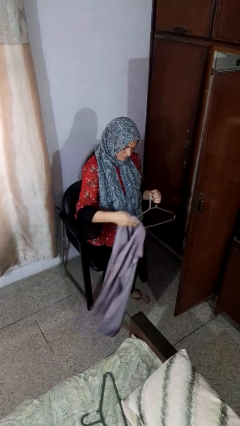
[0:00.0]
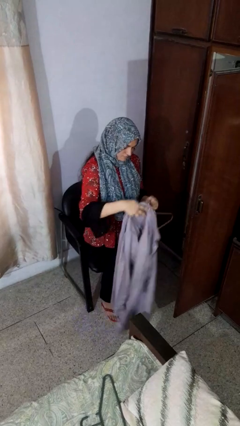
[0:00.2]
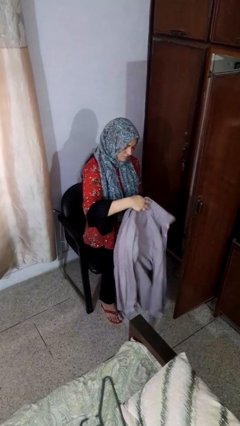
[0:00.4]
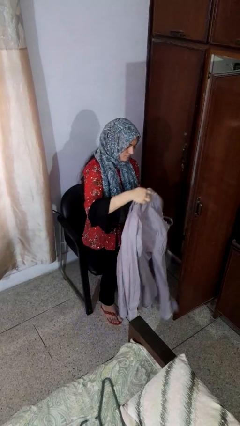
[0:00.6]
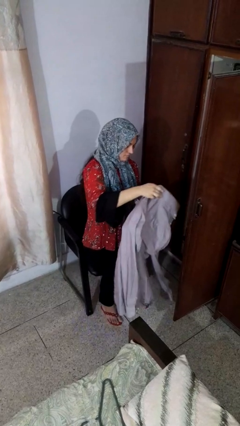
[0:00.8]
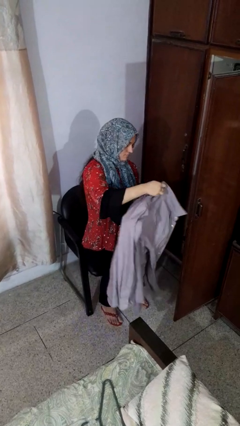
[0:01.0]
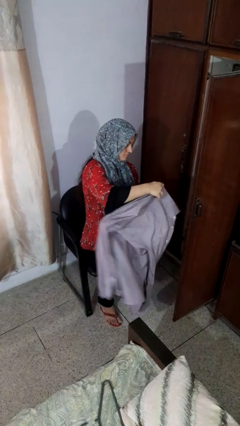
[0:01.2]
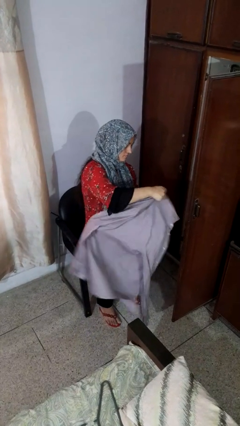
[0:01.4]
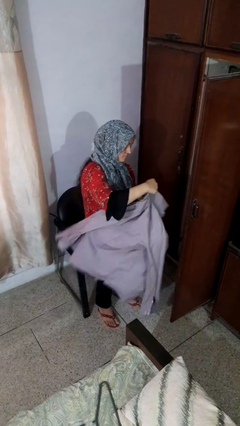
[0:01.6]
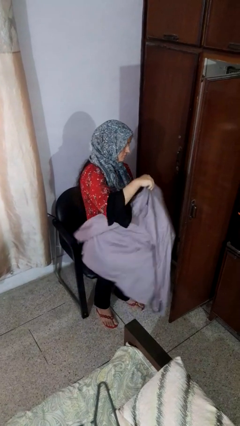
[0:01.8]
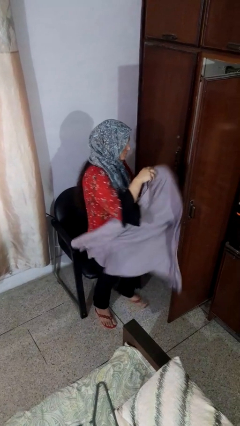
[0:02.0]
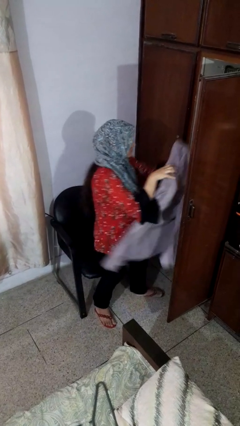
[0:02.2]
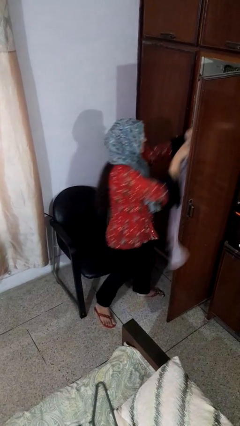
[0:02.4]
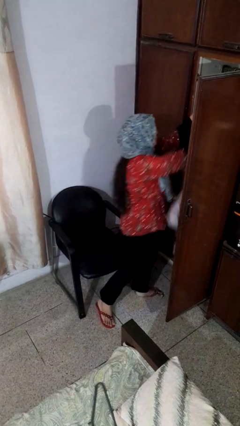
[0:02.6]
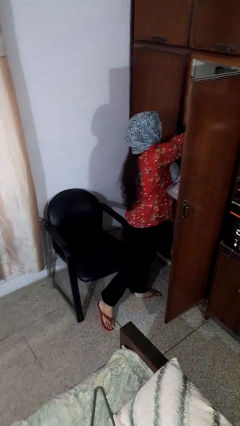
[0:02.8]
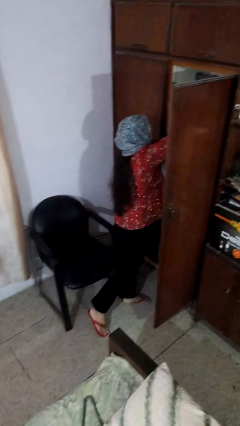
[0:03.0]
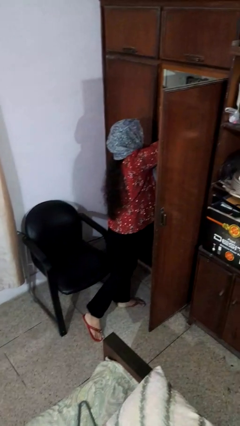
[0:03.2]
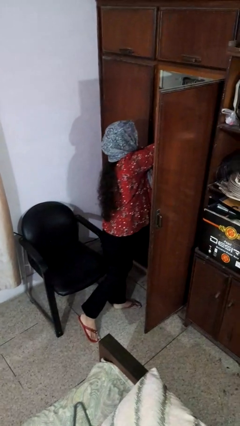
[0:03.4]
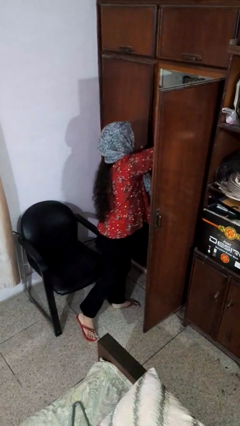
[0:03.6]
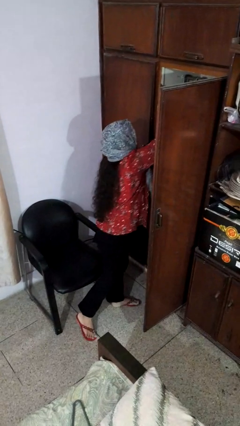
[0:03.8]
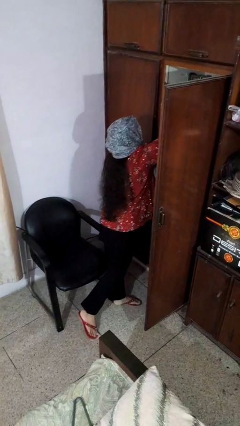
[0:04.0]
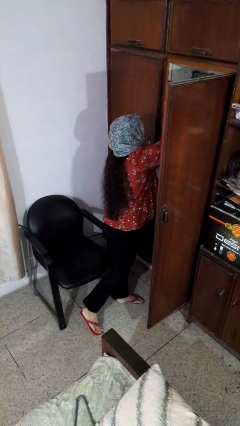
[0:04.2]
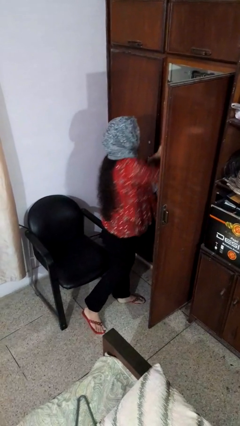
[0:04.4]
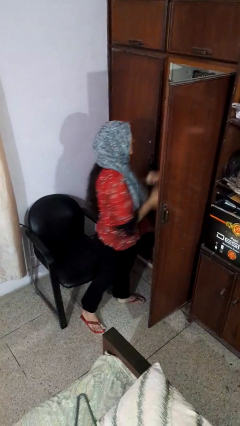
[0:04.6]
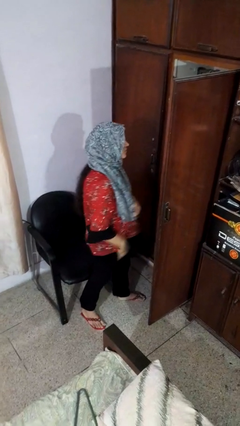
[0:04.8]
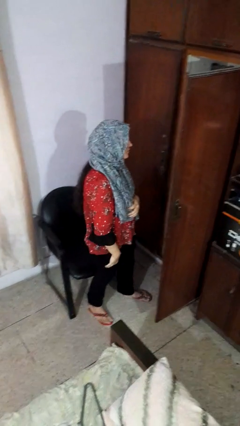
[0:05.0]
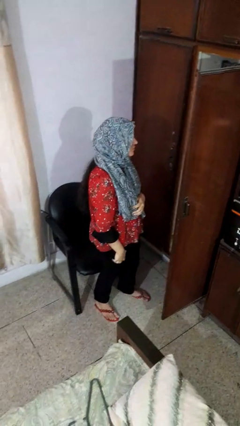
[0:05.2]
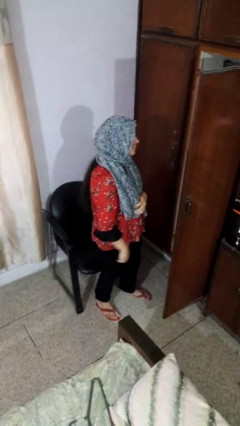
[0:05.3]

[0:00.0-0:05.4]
person puts clothes into closet

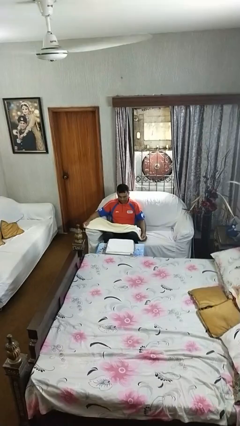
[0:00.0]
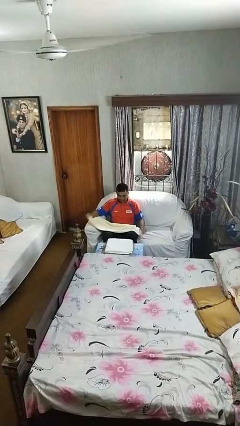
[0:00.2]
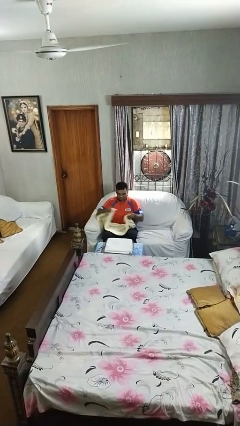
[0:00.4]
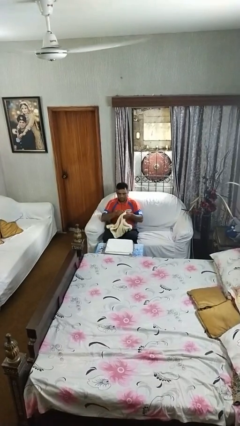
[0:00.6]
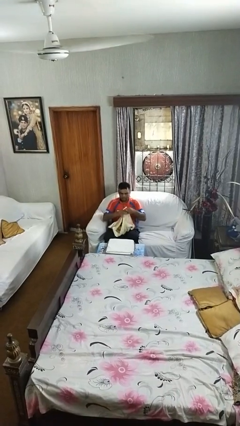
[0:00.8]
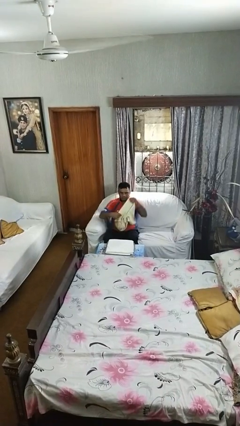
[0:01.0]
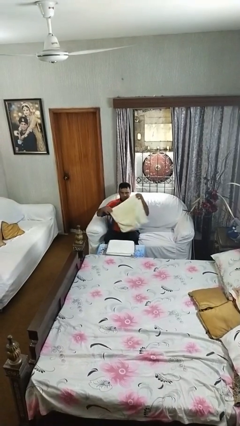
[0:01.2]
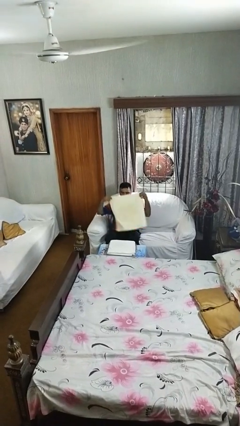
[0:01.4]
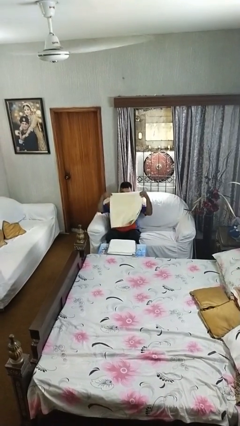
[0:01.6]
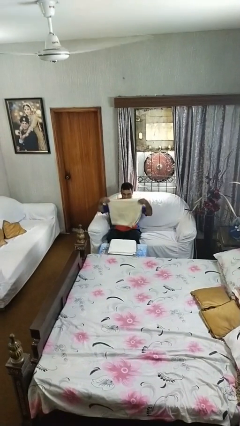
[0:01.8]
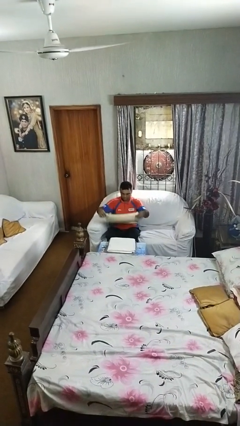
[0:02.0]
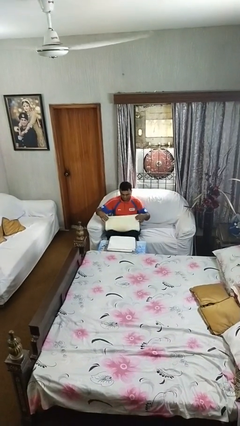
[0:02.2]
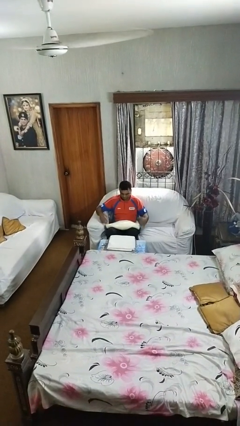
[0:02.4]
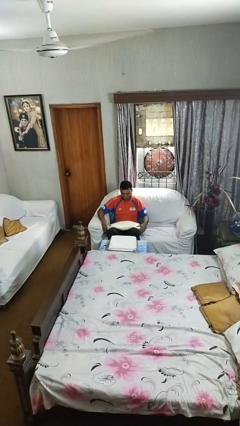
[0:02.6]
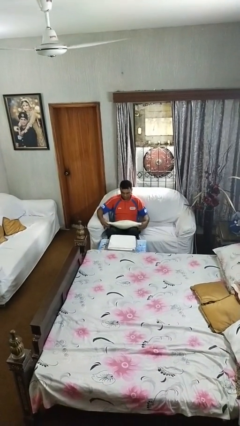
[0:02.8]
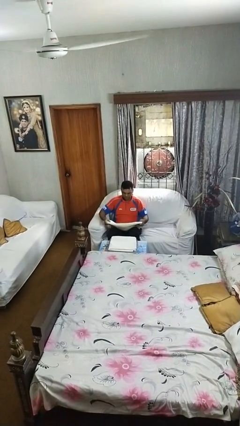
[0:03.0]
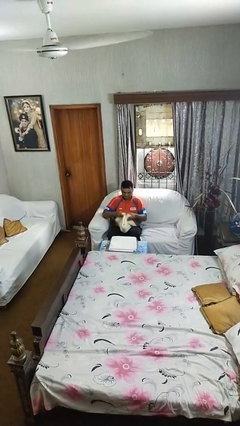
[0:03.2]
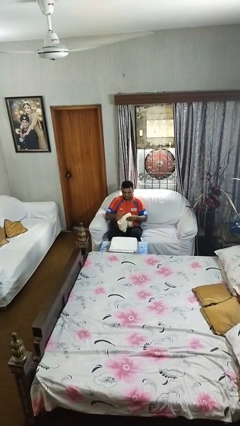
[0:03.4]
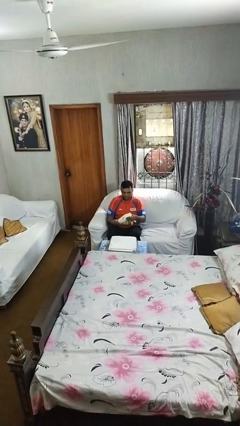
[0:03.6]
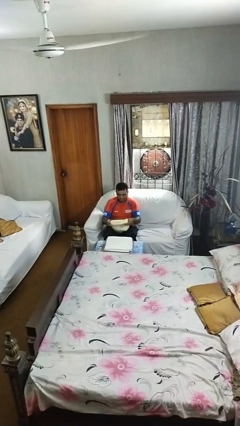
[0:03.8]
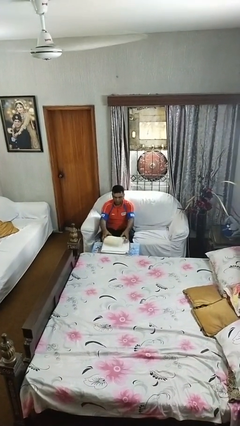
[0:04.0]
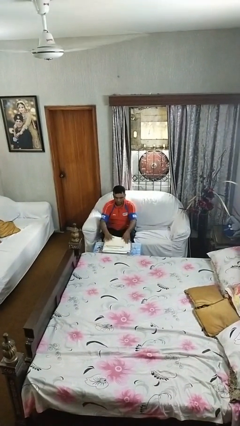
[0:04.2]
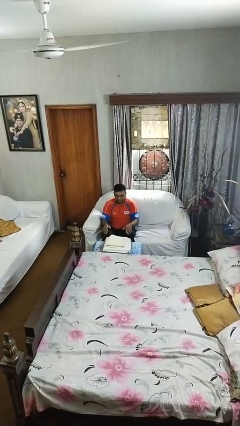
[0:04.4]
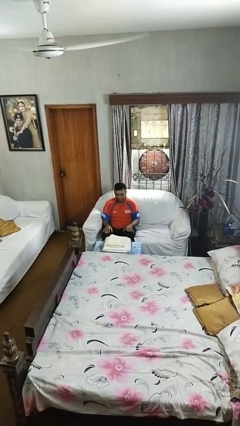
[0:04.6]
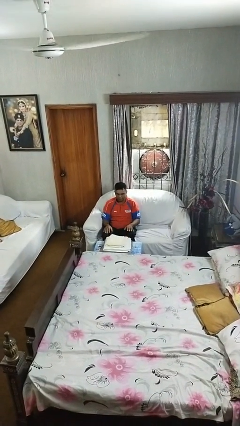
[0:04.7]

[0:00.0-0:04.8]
person folds towel

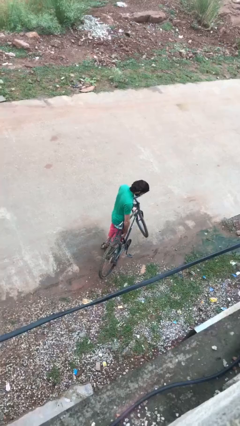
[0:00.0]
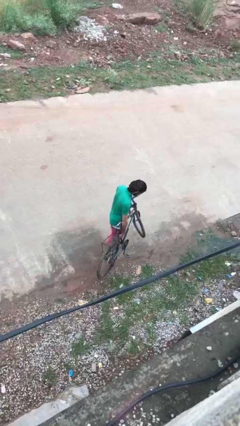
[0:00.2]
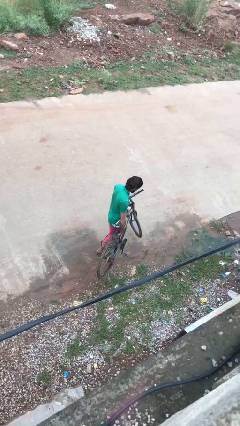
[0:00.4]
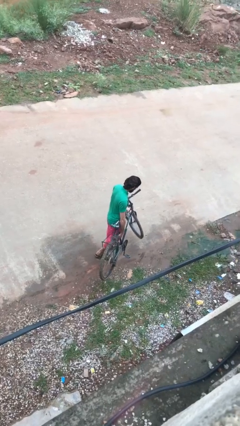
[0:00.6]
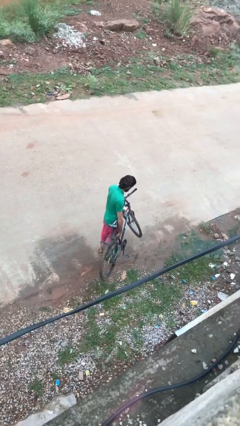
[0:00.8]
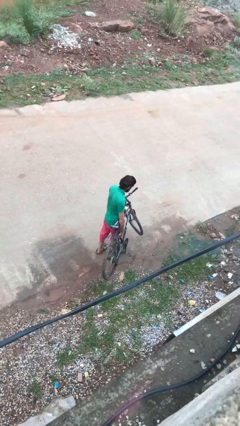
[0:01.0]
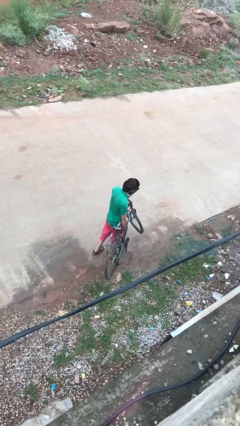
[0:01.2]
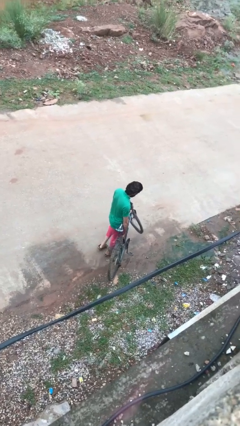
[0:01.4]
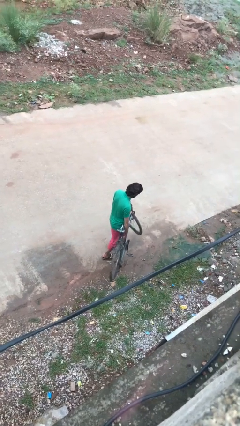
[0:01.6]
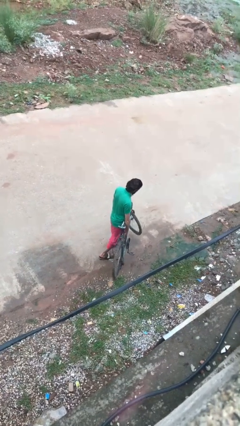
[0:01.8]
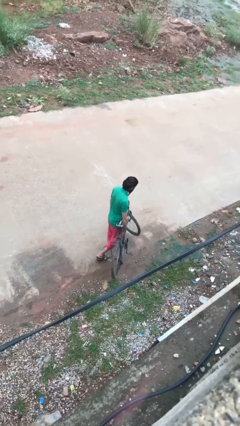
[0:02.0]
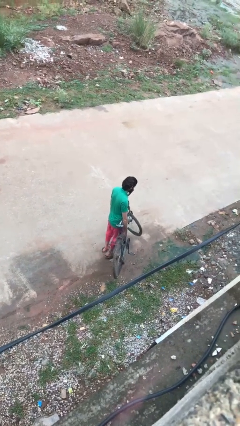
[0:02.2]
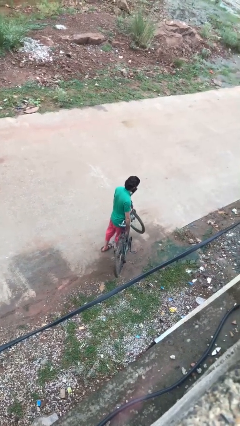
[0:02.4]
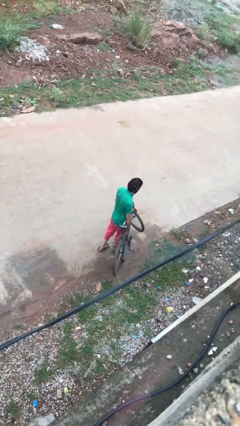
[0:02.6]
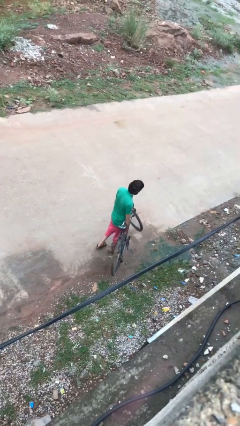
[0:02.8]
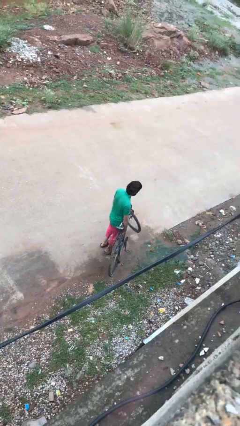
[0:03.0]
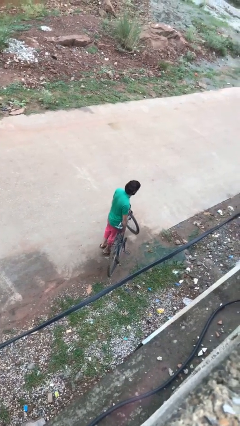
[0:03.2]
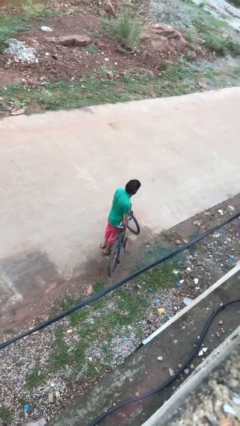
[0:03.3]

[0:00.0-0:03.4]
person carries bicycle

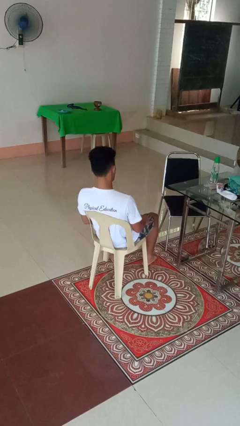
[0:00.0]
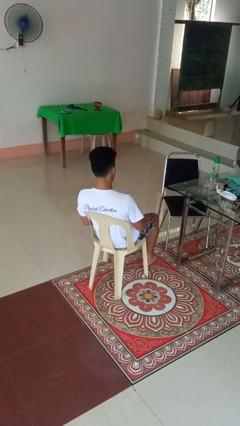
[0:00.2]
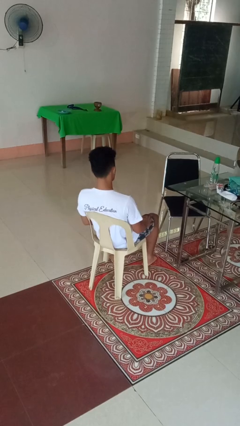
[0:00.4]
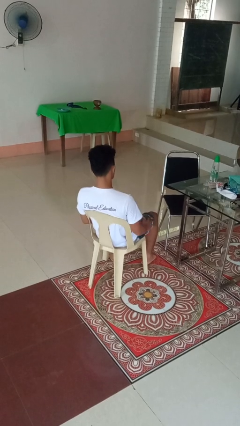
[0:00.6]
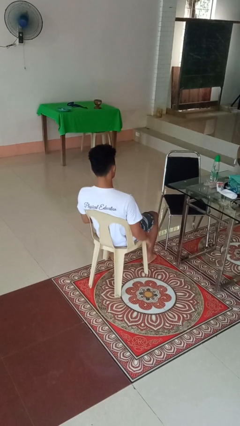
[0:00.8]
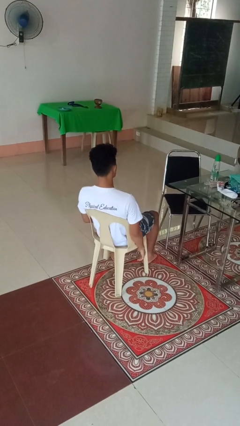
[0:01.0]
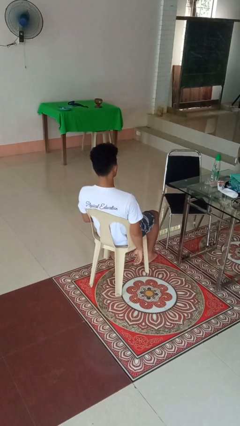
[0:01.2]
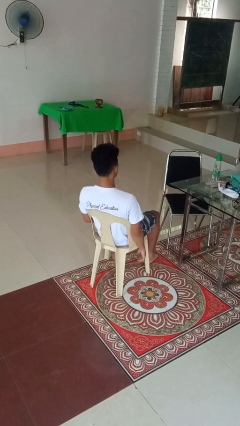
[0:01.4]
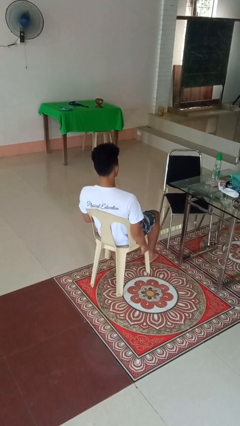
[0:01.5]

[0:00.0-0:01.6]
person slaps hands on thighs

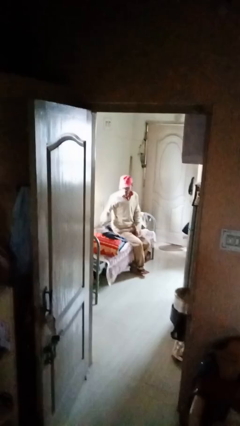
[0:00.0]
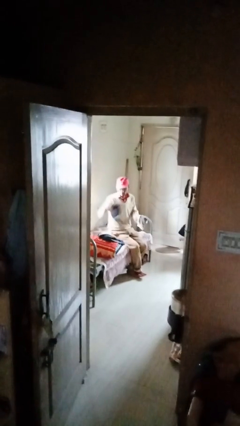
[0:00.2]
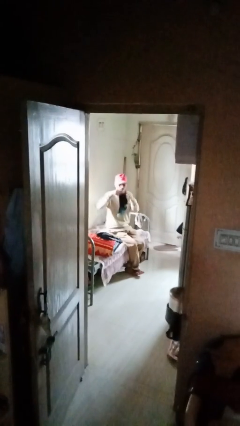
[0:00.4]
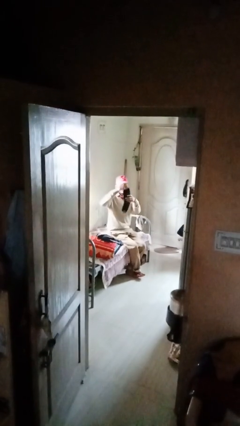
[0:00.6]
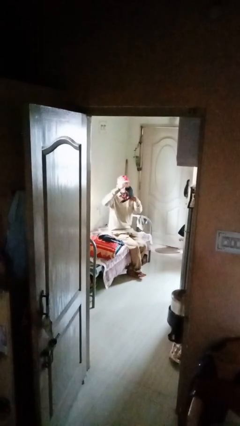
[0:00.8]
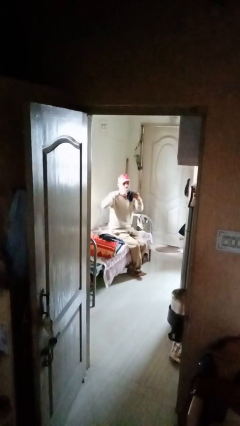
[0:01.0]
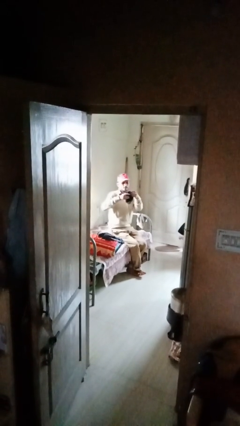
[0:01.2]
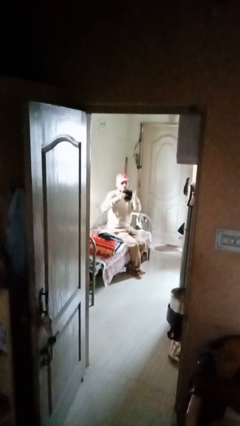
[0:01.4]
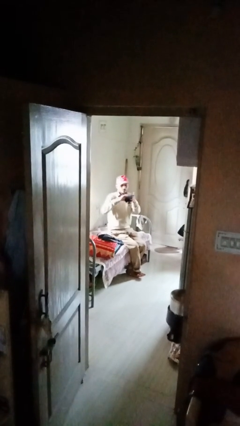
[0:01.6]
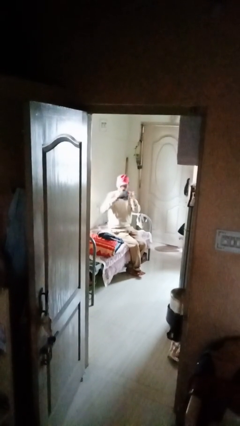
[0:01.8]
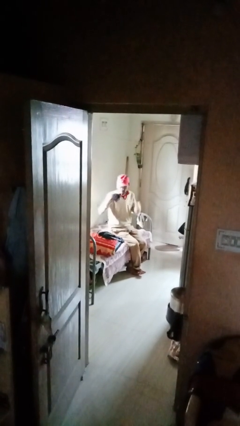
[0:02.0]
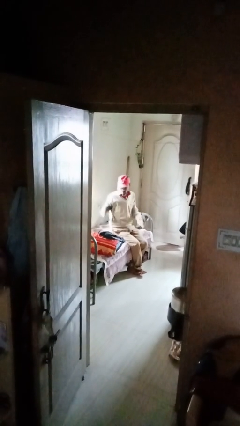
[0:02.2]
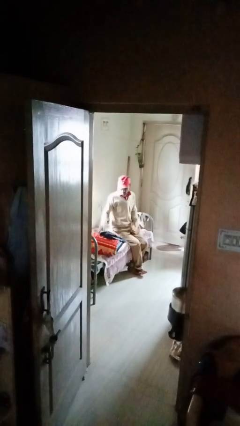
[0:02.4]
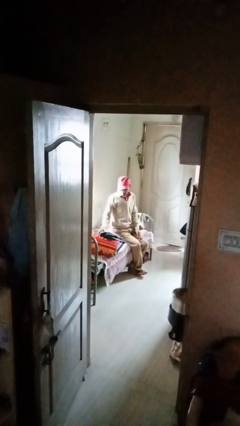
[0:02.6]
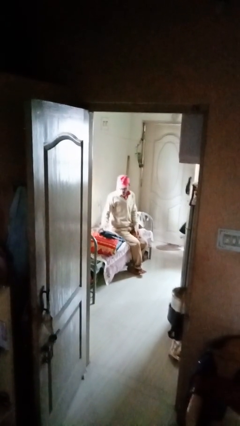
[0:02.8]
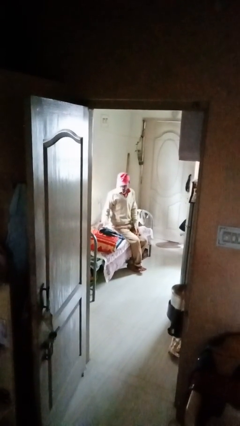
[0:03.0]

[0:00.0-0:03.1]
person folds socks
